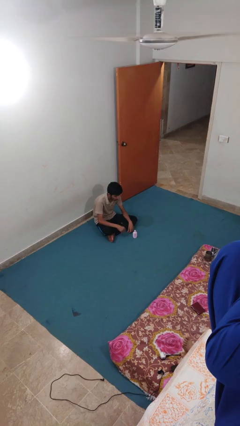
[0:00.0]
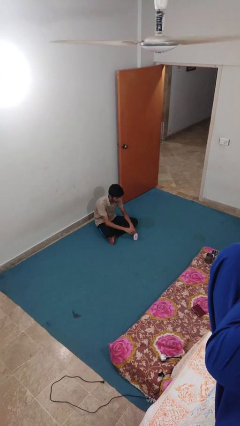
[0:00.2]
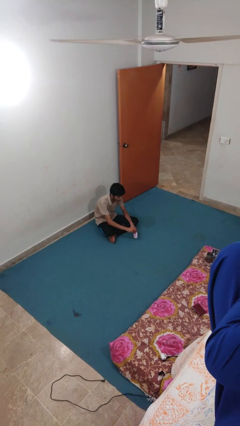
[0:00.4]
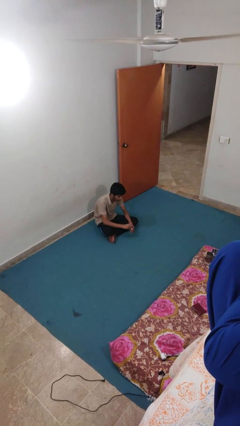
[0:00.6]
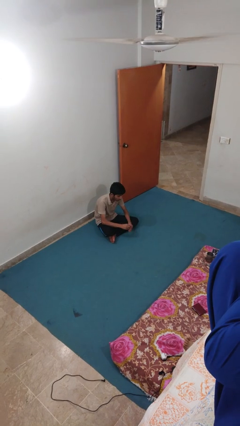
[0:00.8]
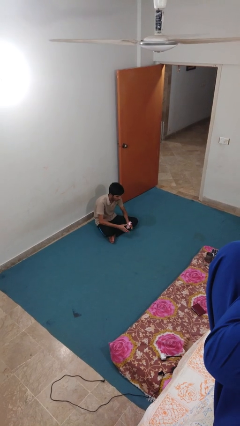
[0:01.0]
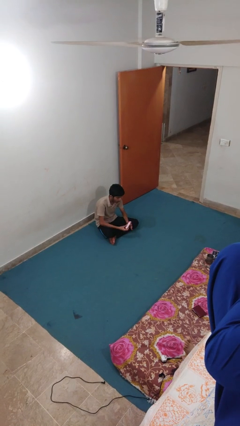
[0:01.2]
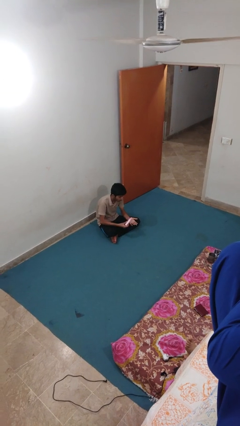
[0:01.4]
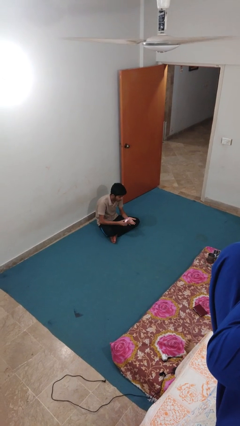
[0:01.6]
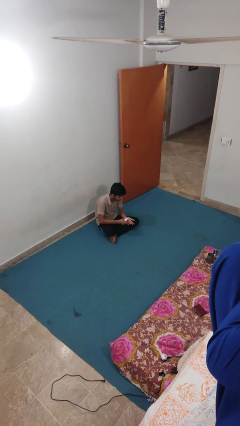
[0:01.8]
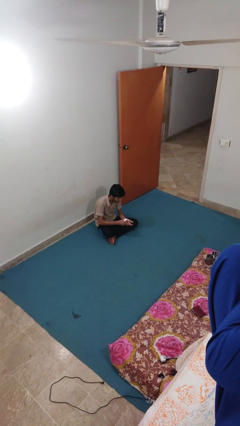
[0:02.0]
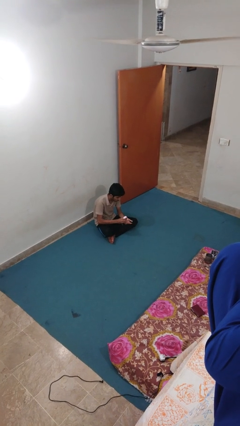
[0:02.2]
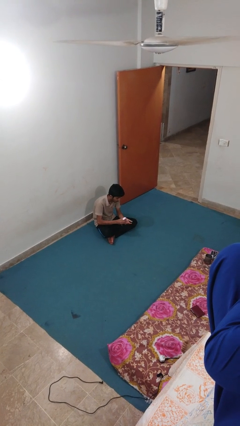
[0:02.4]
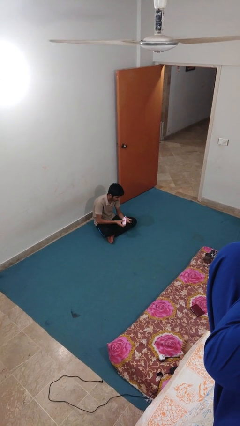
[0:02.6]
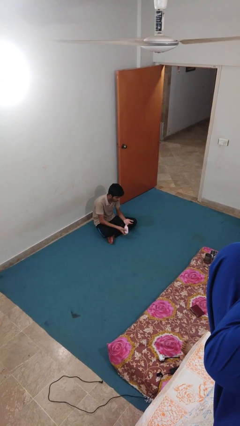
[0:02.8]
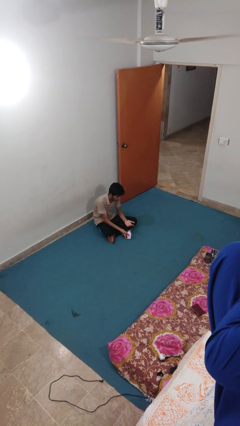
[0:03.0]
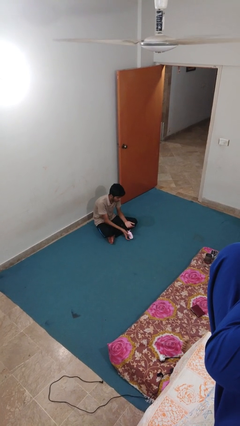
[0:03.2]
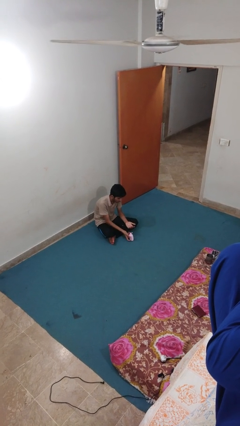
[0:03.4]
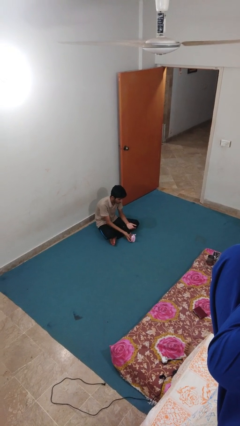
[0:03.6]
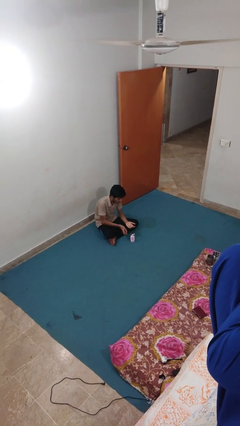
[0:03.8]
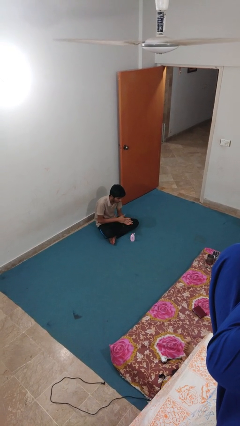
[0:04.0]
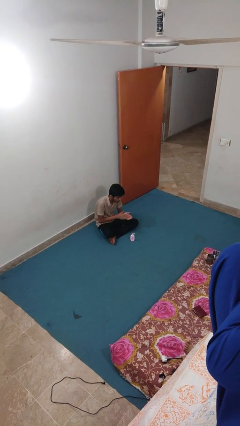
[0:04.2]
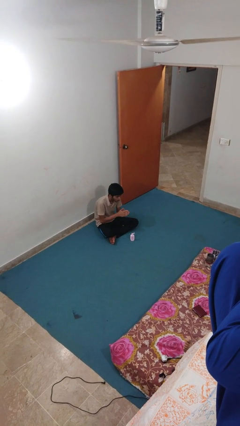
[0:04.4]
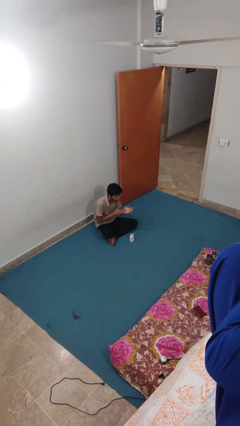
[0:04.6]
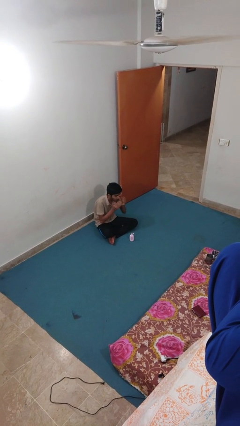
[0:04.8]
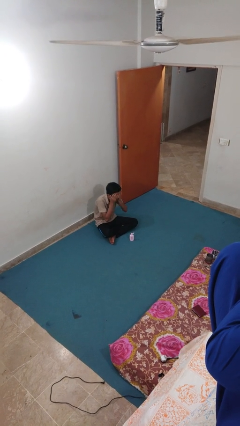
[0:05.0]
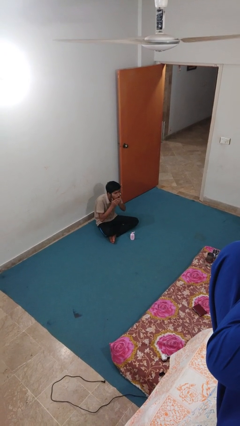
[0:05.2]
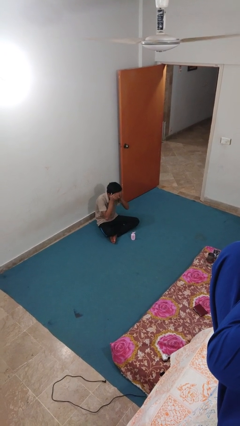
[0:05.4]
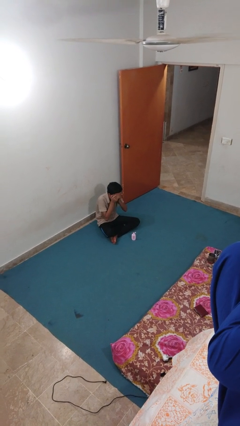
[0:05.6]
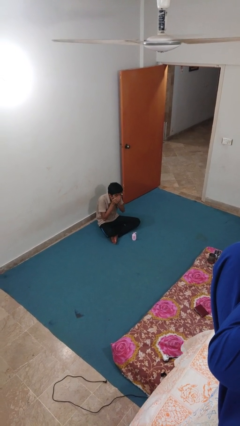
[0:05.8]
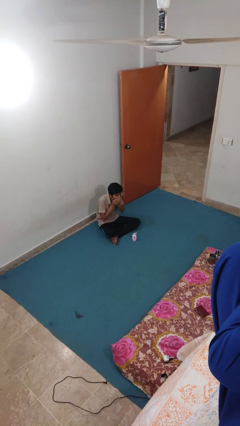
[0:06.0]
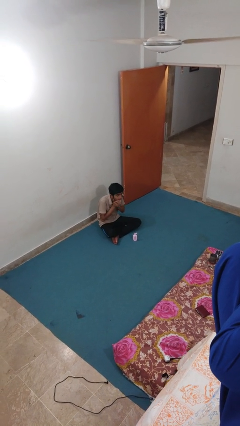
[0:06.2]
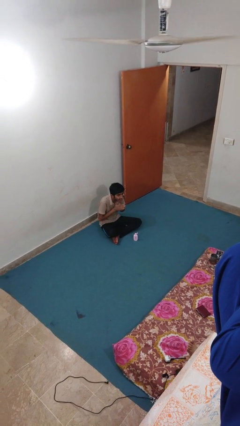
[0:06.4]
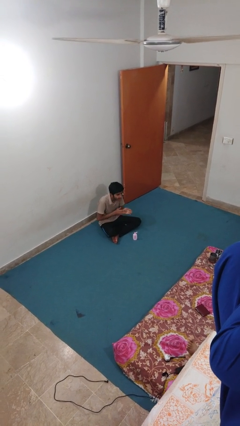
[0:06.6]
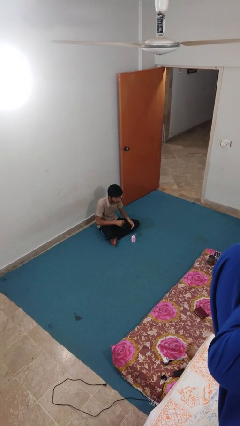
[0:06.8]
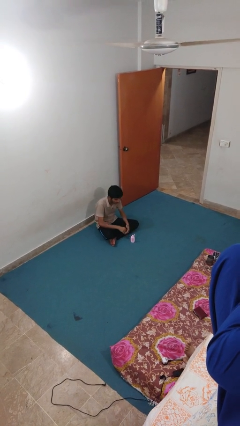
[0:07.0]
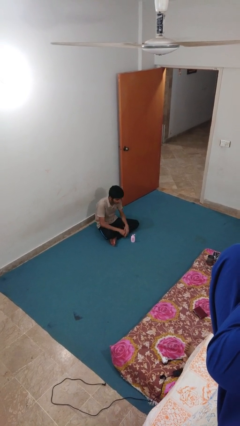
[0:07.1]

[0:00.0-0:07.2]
person applies sunscreen

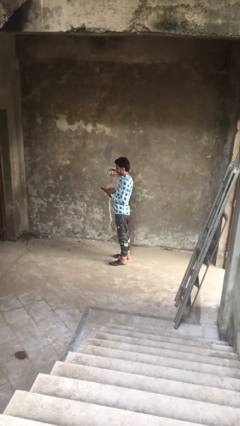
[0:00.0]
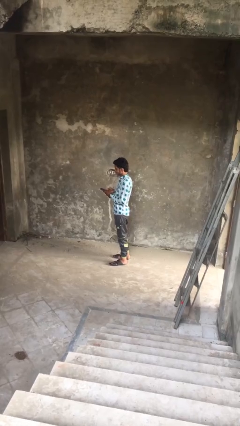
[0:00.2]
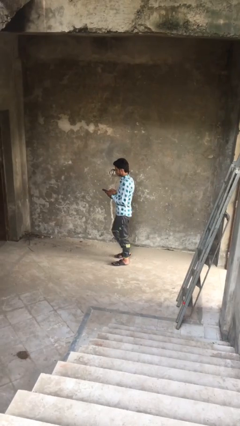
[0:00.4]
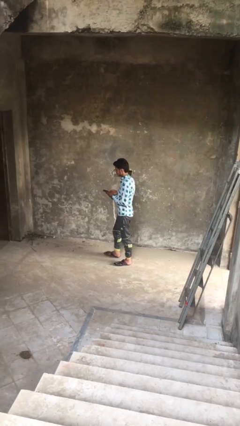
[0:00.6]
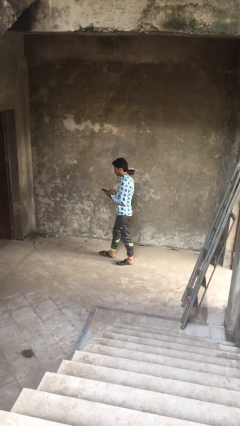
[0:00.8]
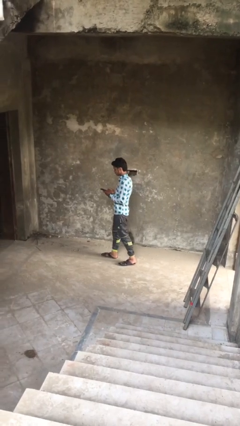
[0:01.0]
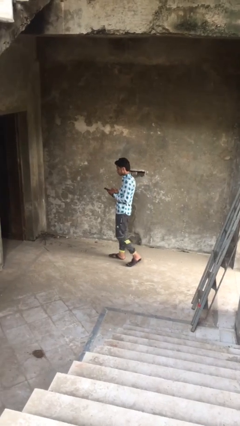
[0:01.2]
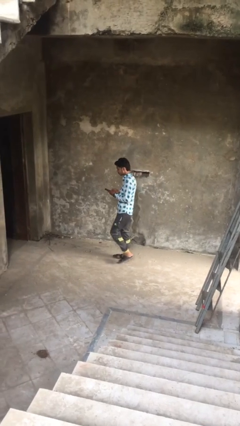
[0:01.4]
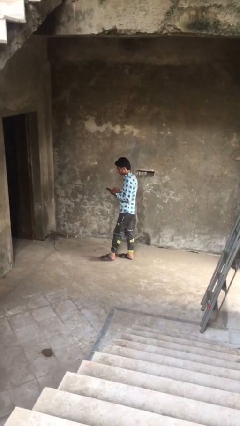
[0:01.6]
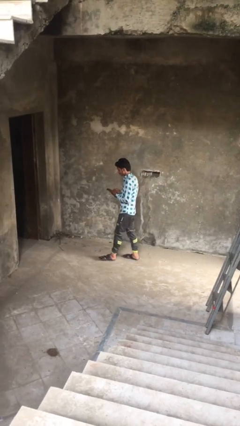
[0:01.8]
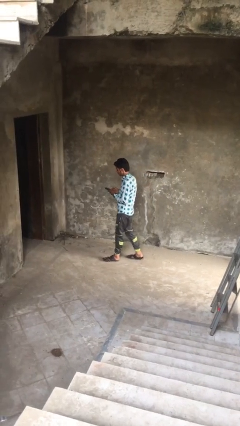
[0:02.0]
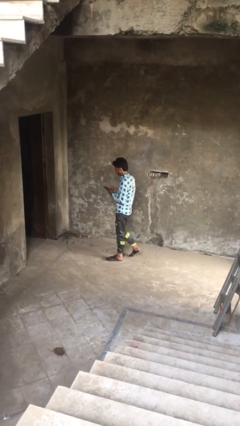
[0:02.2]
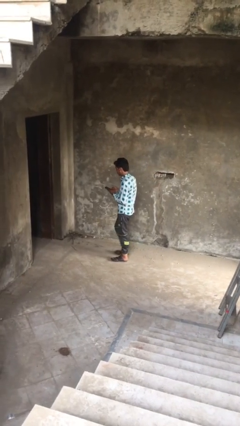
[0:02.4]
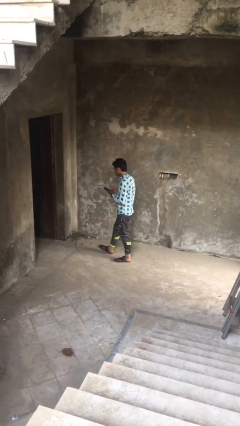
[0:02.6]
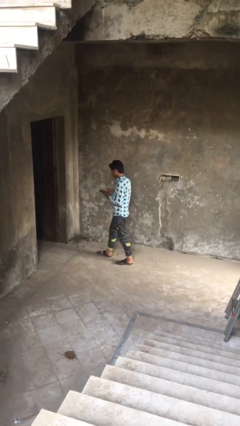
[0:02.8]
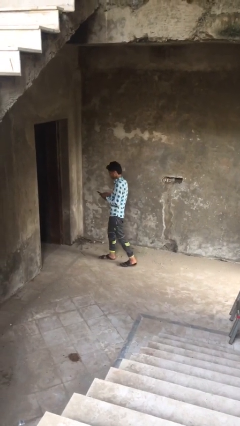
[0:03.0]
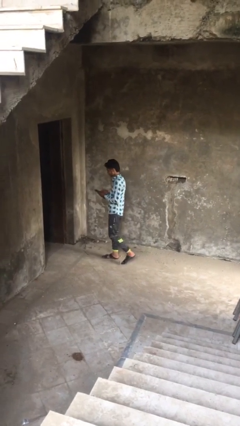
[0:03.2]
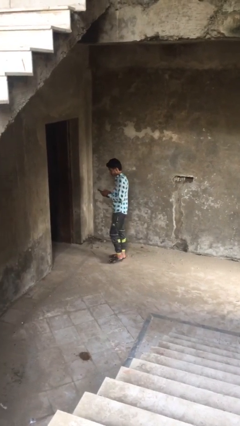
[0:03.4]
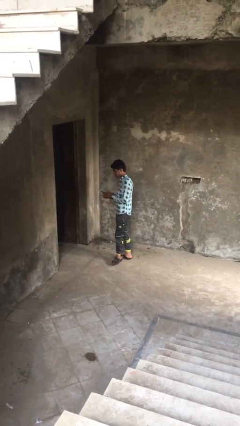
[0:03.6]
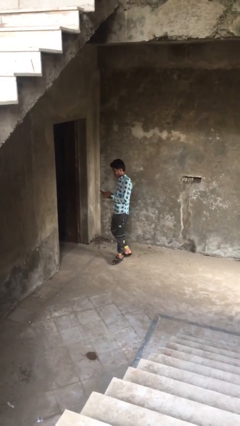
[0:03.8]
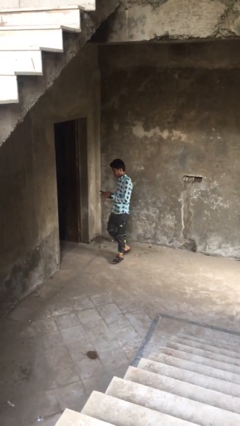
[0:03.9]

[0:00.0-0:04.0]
person texts on phone

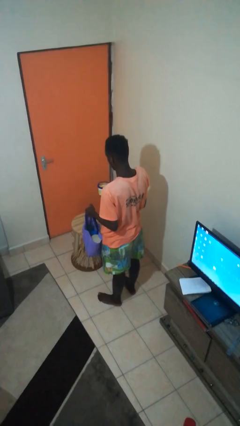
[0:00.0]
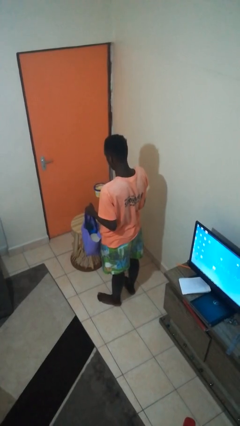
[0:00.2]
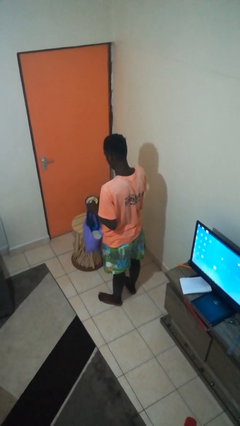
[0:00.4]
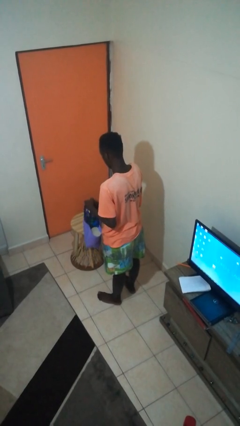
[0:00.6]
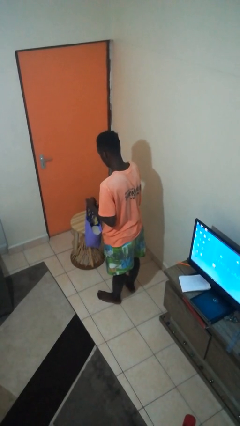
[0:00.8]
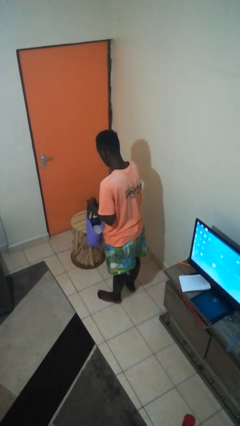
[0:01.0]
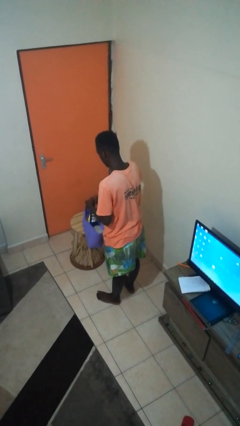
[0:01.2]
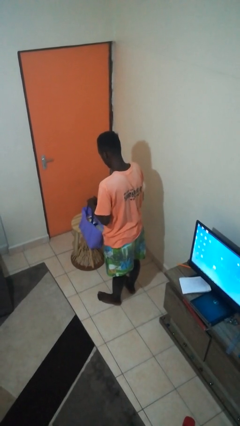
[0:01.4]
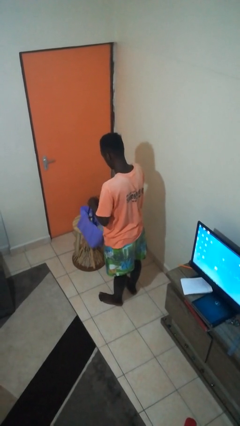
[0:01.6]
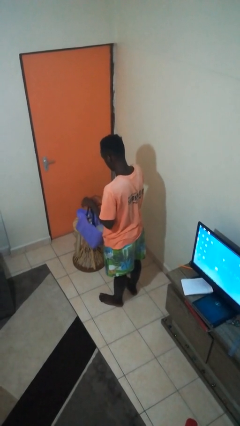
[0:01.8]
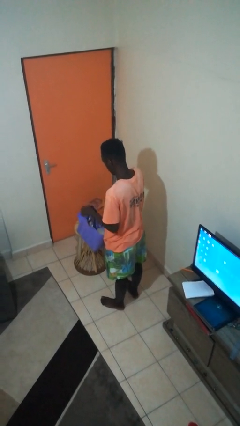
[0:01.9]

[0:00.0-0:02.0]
person puts object into bag

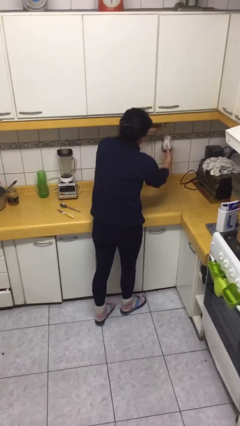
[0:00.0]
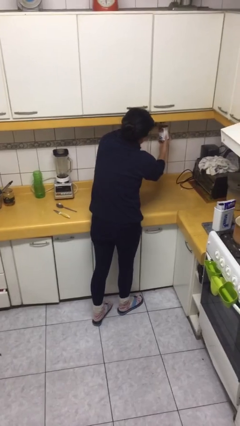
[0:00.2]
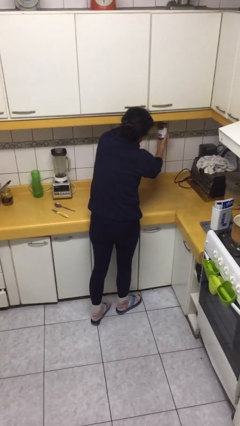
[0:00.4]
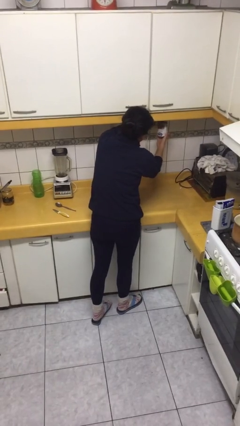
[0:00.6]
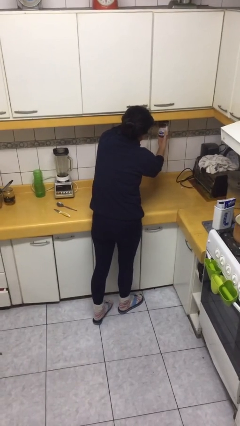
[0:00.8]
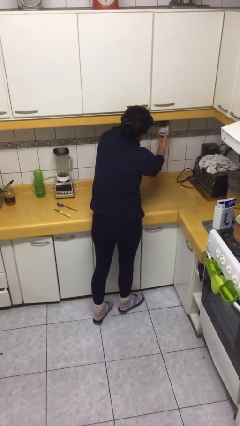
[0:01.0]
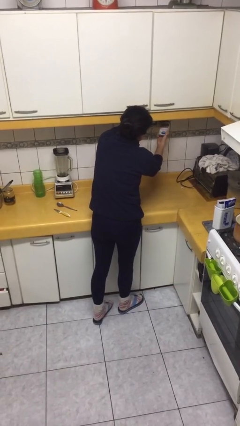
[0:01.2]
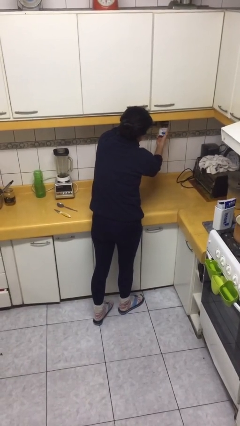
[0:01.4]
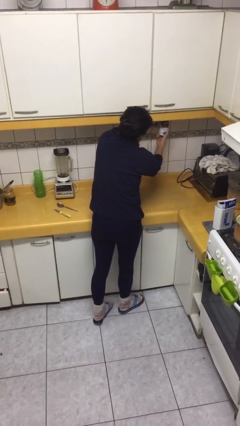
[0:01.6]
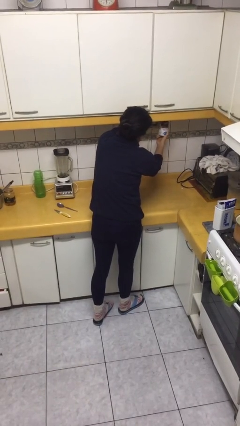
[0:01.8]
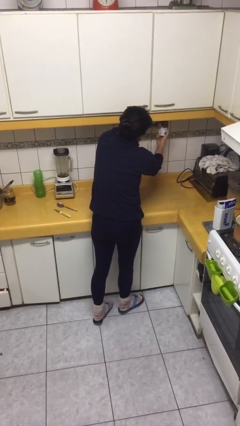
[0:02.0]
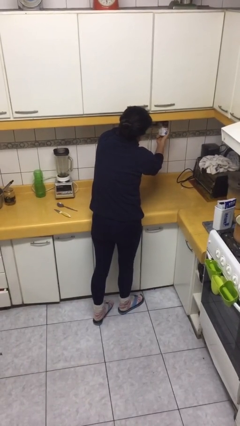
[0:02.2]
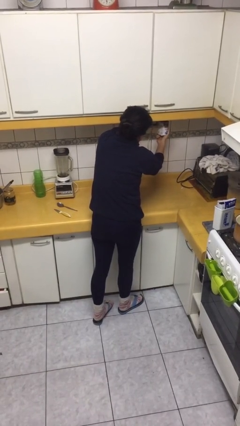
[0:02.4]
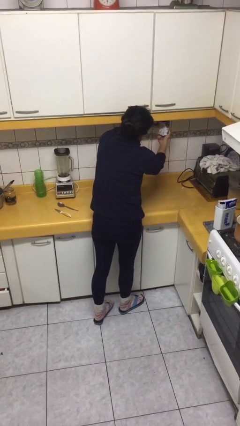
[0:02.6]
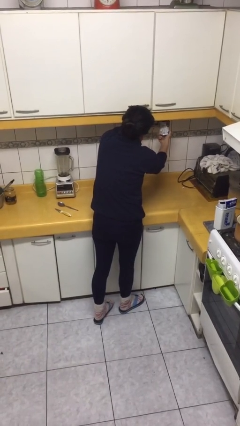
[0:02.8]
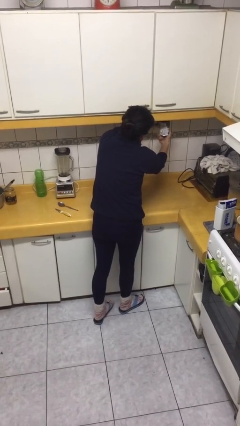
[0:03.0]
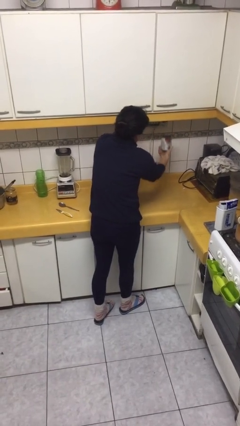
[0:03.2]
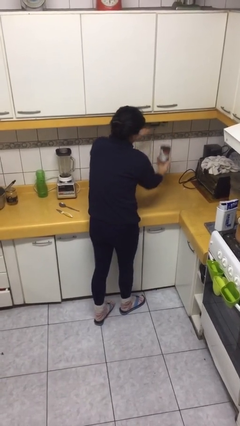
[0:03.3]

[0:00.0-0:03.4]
person opens can with can opener

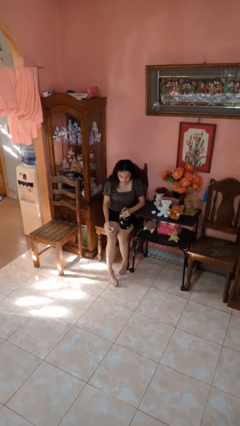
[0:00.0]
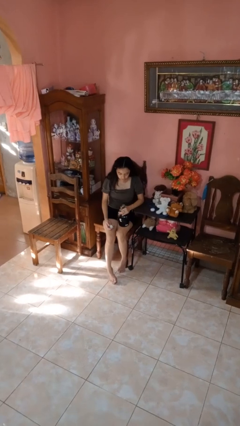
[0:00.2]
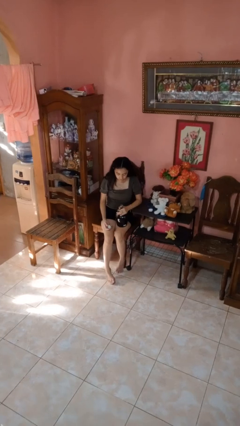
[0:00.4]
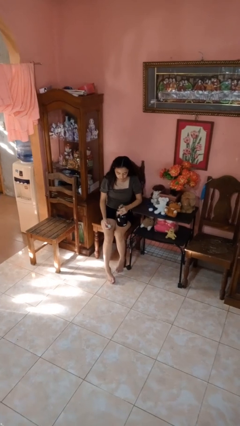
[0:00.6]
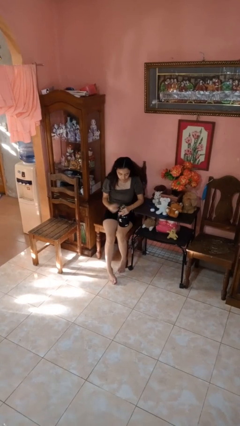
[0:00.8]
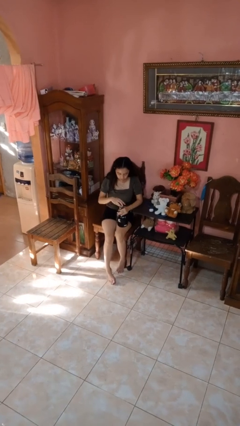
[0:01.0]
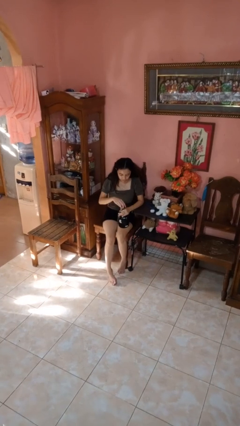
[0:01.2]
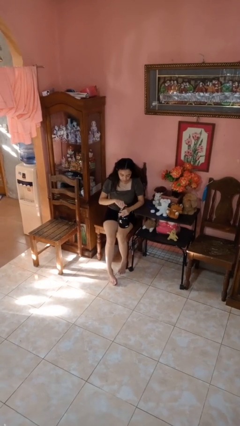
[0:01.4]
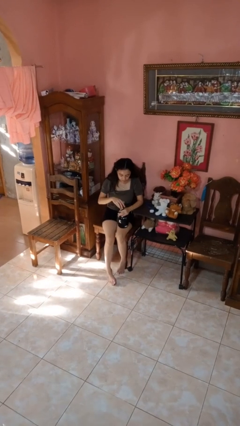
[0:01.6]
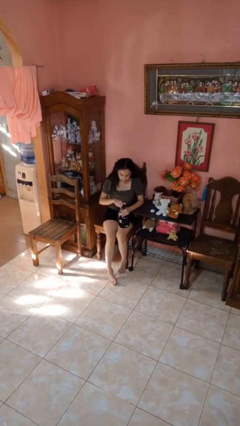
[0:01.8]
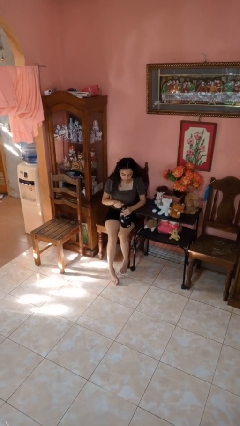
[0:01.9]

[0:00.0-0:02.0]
person screws lid to bottle
